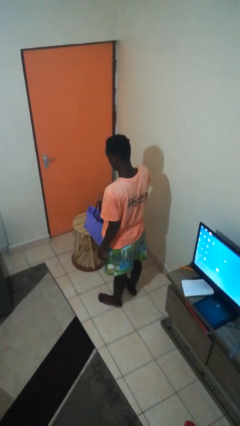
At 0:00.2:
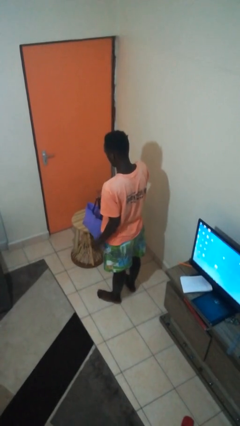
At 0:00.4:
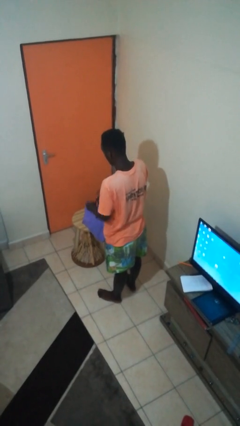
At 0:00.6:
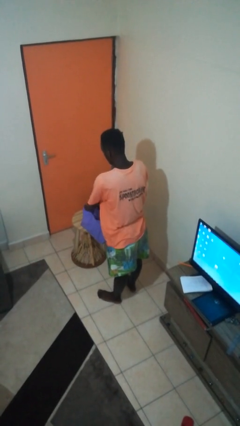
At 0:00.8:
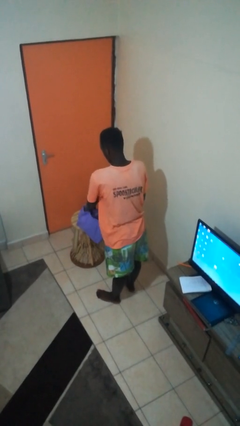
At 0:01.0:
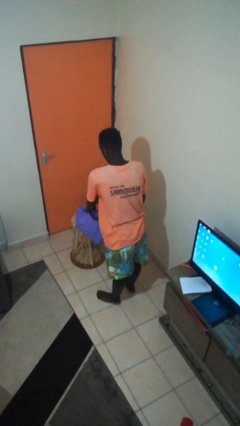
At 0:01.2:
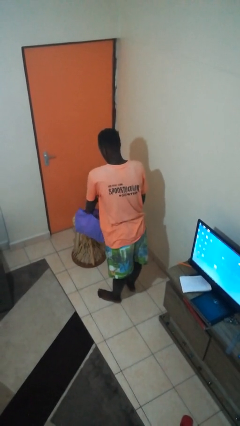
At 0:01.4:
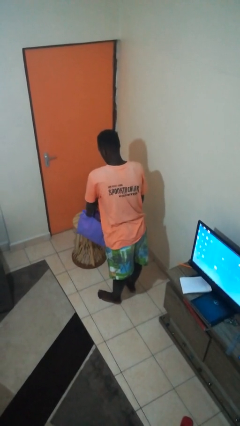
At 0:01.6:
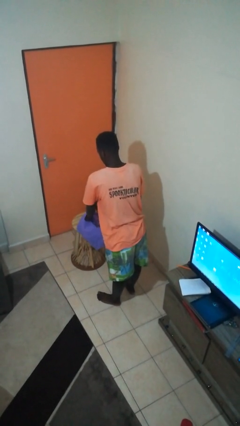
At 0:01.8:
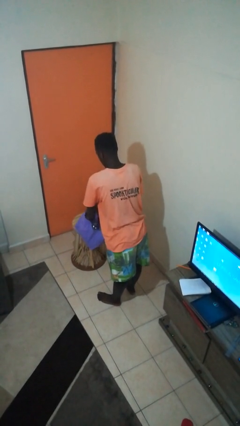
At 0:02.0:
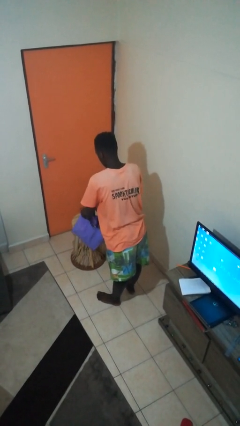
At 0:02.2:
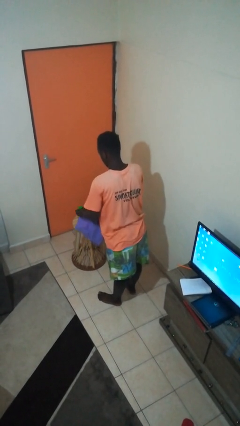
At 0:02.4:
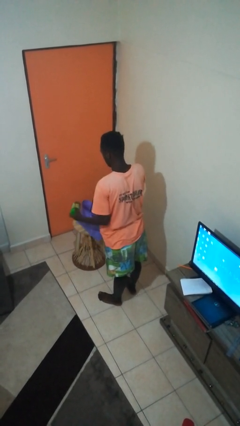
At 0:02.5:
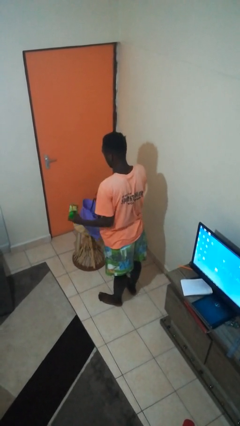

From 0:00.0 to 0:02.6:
person takes object from bag

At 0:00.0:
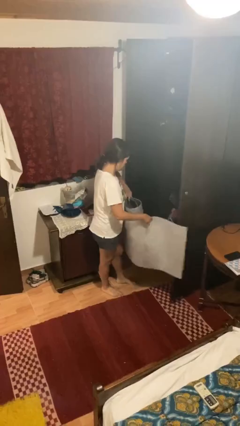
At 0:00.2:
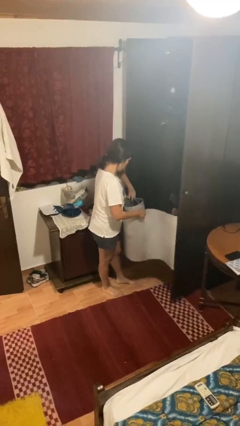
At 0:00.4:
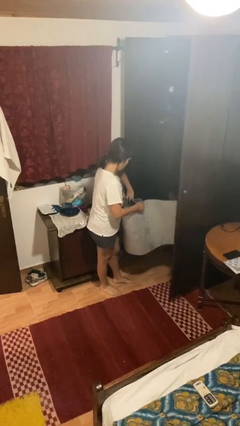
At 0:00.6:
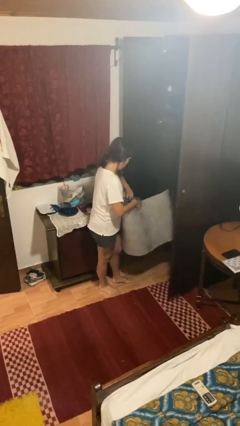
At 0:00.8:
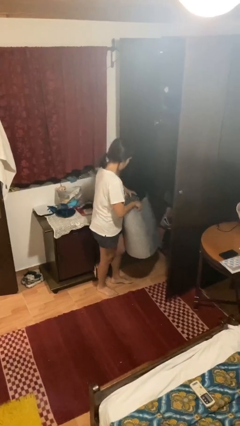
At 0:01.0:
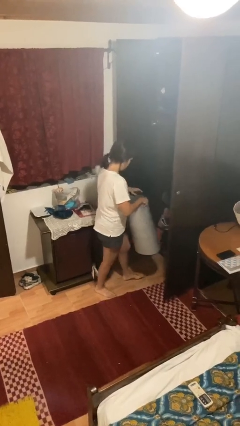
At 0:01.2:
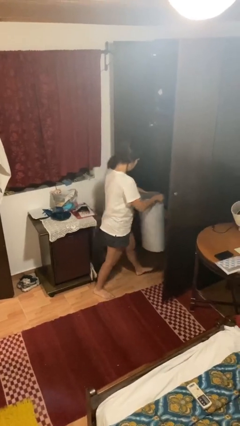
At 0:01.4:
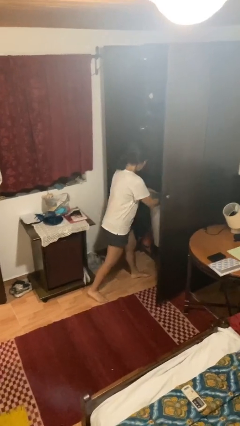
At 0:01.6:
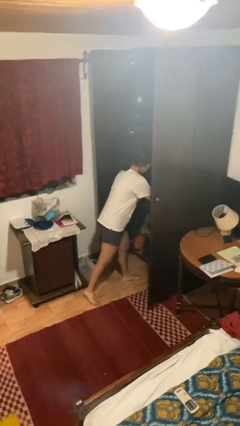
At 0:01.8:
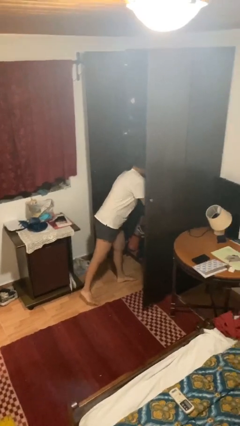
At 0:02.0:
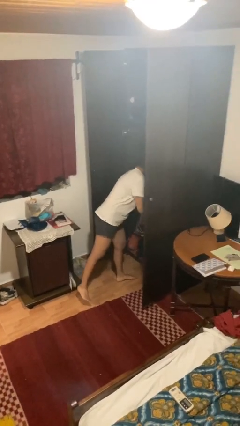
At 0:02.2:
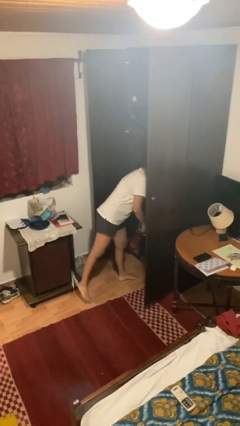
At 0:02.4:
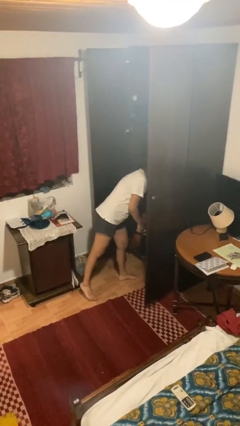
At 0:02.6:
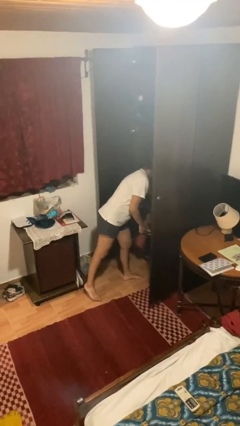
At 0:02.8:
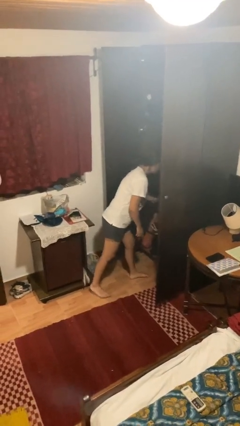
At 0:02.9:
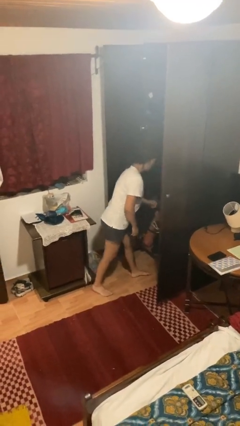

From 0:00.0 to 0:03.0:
person puts down object into cabinet

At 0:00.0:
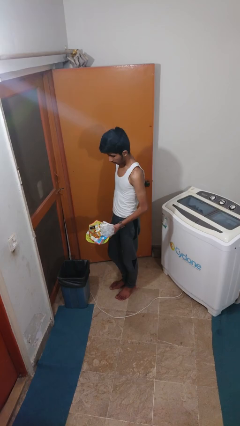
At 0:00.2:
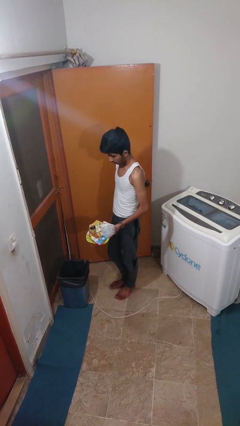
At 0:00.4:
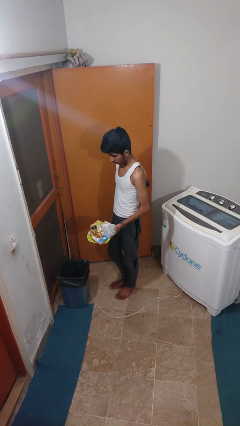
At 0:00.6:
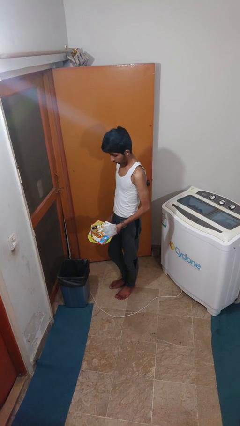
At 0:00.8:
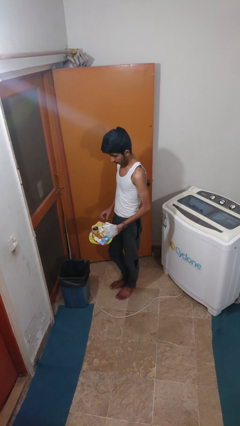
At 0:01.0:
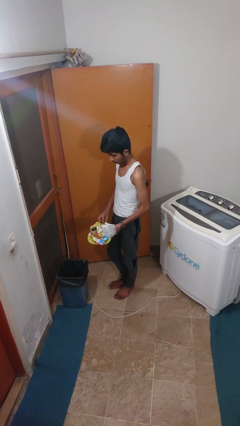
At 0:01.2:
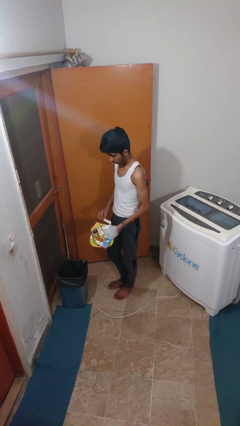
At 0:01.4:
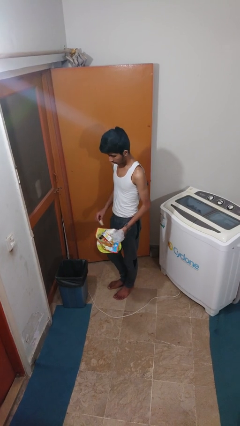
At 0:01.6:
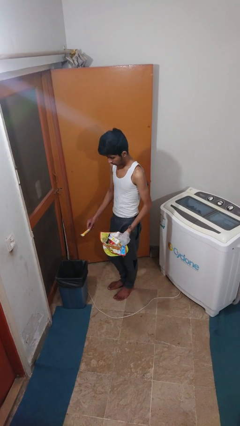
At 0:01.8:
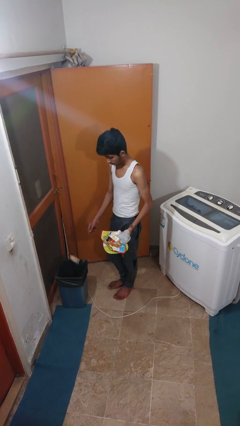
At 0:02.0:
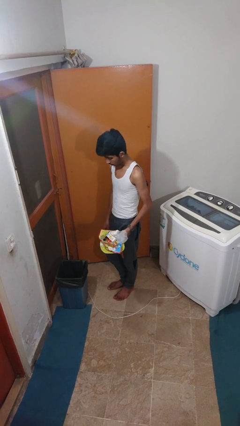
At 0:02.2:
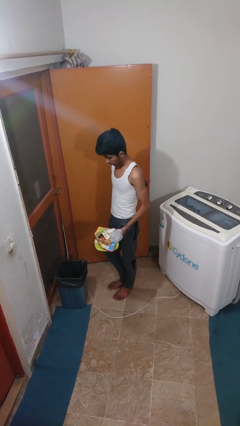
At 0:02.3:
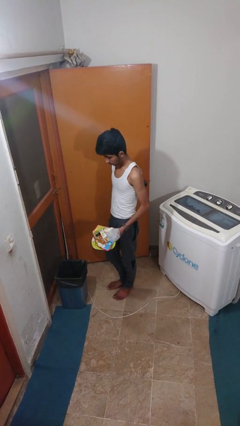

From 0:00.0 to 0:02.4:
person discards trash

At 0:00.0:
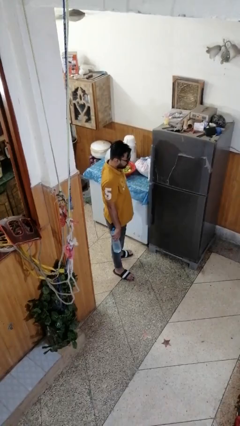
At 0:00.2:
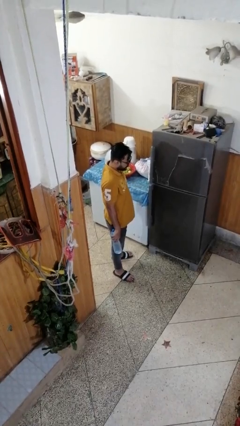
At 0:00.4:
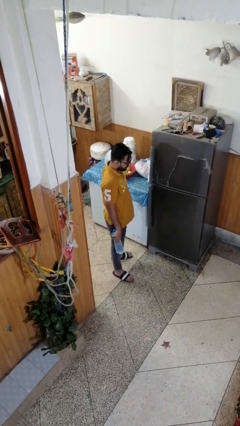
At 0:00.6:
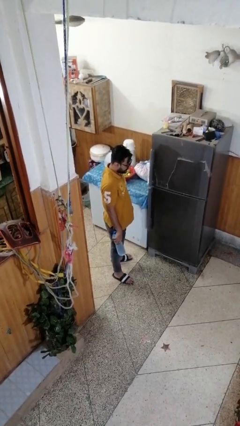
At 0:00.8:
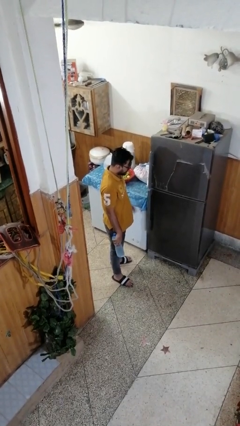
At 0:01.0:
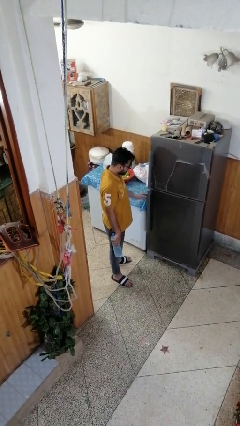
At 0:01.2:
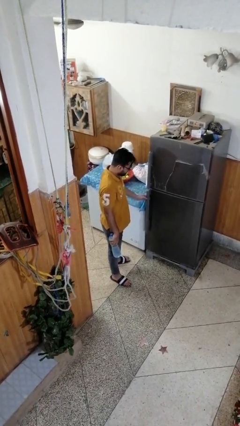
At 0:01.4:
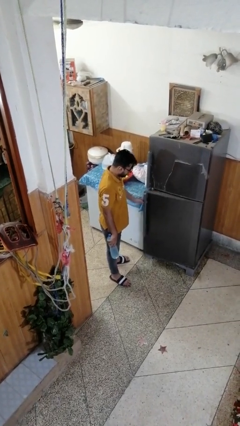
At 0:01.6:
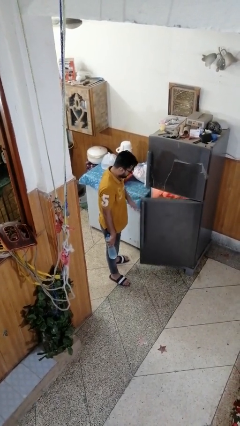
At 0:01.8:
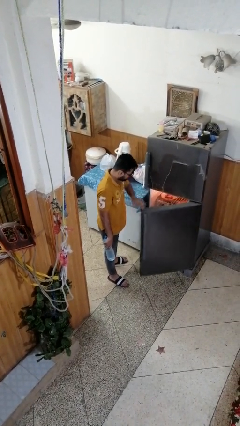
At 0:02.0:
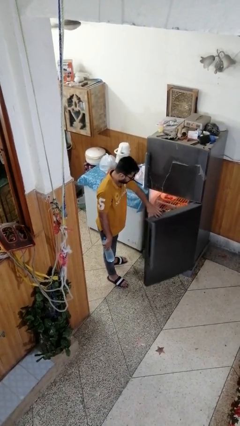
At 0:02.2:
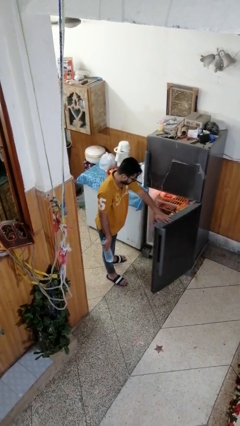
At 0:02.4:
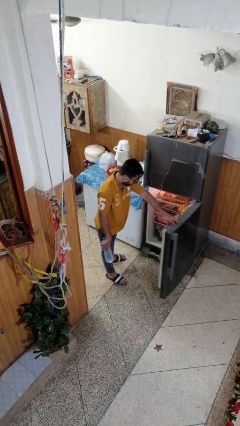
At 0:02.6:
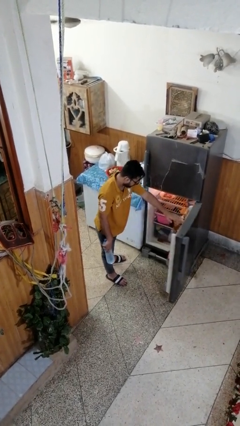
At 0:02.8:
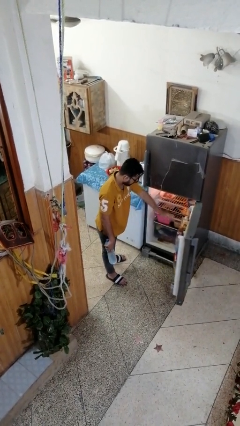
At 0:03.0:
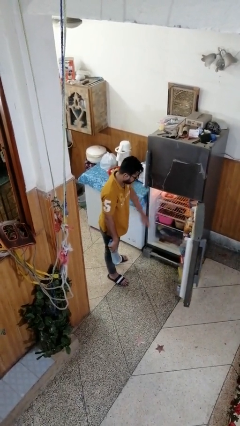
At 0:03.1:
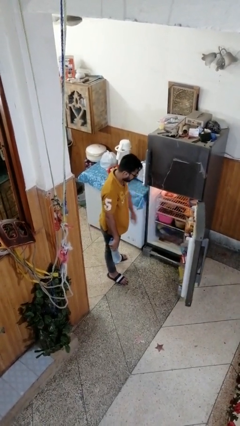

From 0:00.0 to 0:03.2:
person opens refrigerator

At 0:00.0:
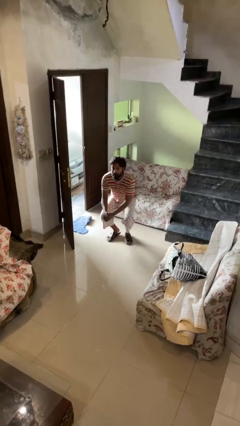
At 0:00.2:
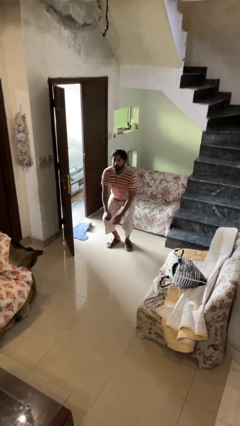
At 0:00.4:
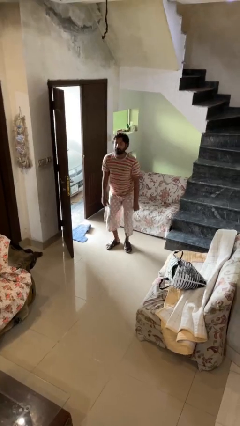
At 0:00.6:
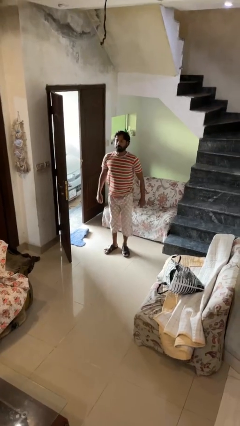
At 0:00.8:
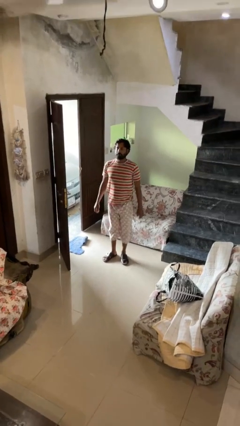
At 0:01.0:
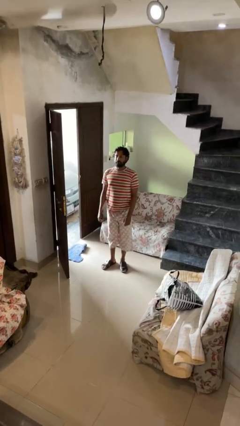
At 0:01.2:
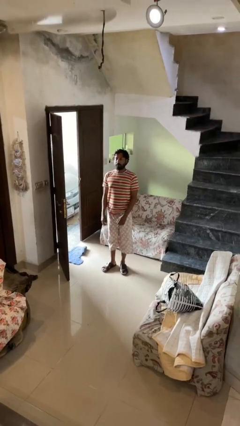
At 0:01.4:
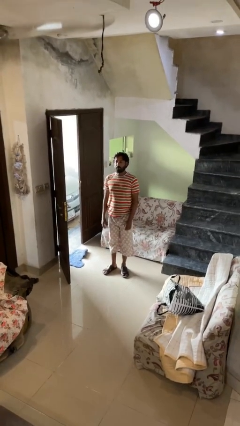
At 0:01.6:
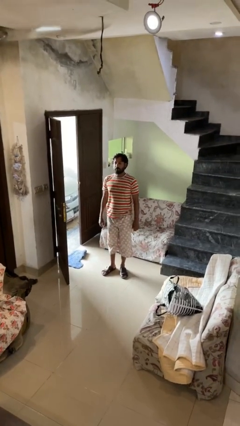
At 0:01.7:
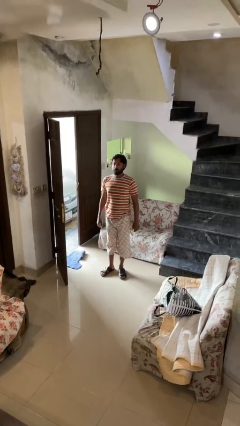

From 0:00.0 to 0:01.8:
person stands up

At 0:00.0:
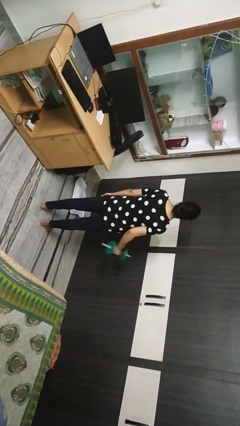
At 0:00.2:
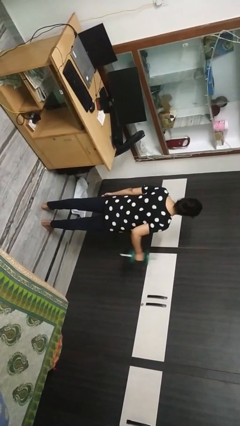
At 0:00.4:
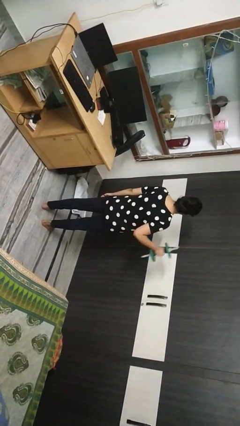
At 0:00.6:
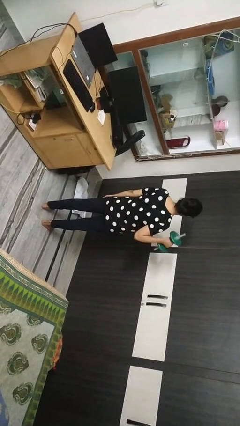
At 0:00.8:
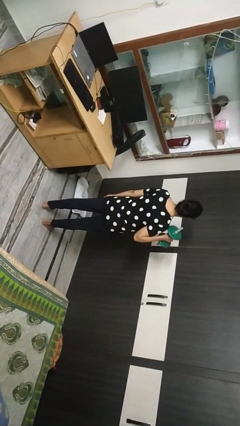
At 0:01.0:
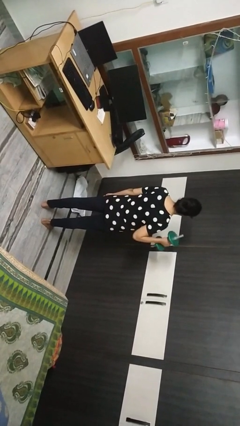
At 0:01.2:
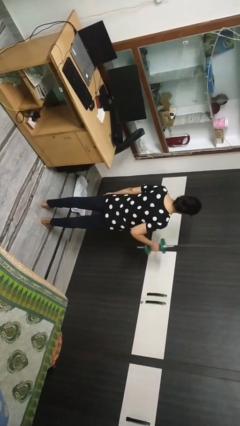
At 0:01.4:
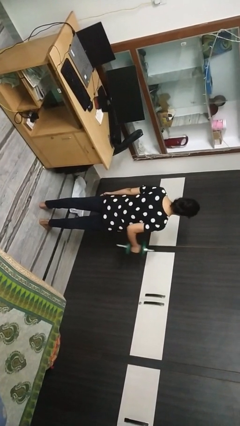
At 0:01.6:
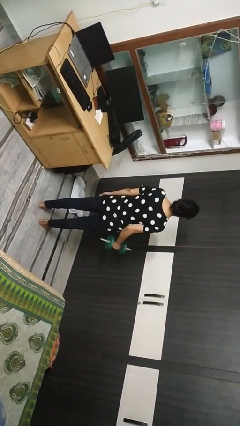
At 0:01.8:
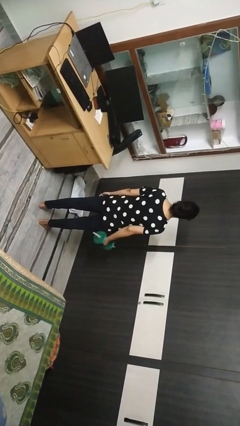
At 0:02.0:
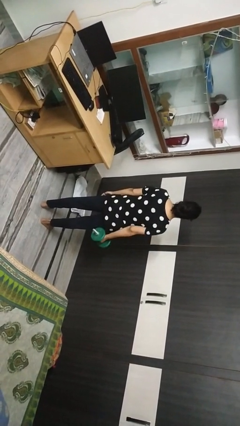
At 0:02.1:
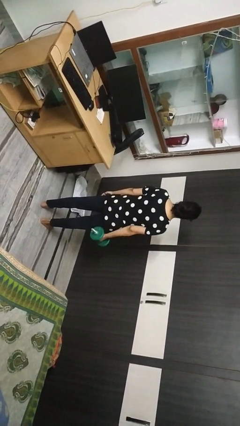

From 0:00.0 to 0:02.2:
person lifts dumbbells

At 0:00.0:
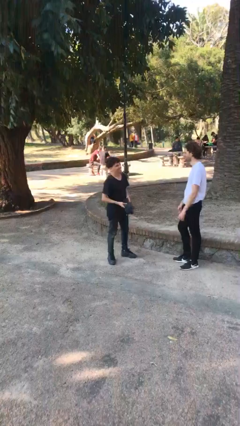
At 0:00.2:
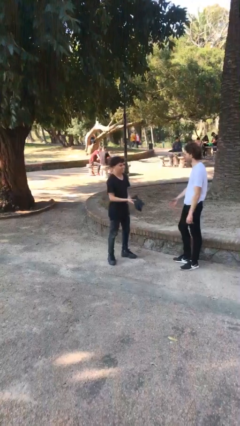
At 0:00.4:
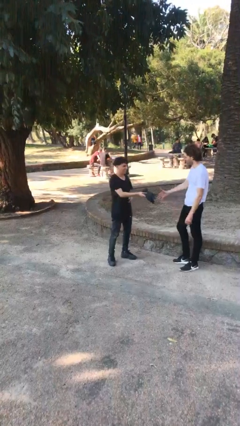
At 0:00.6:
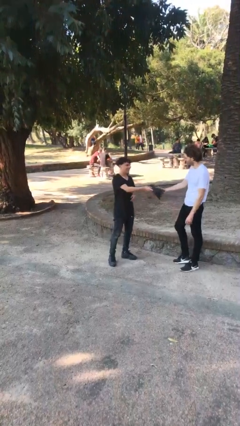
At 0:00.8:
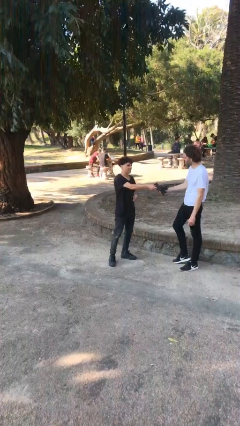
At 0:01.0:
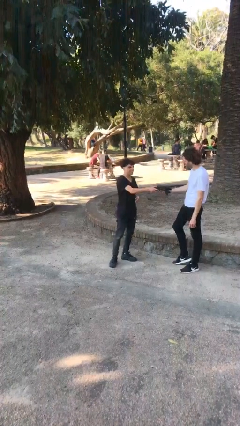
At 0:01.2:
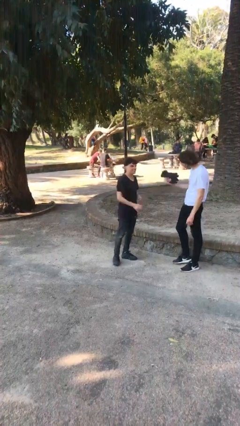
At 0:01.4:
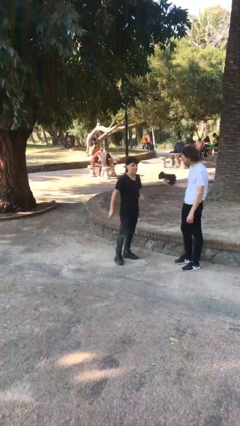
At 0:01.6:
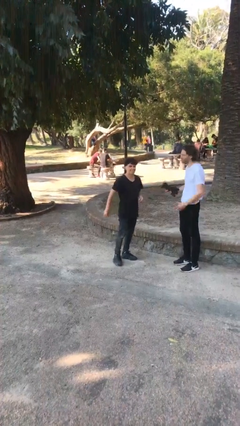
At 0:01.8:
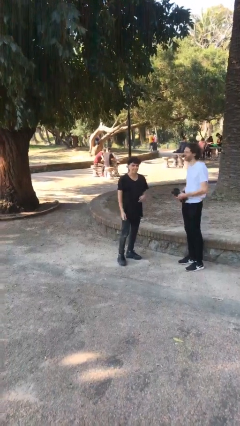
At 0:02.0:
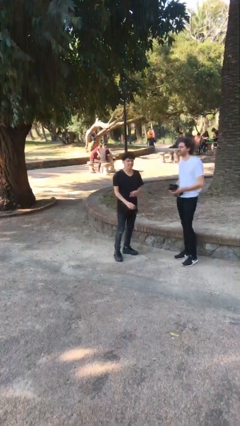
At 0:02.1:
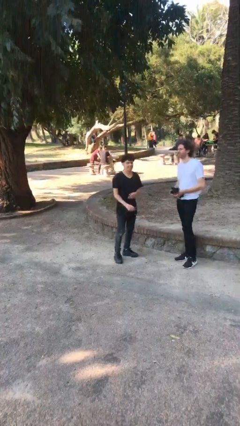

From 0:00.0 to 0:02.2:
person transfers object to person
